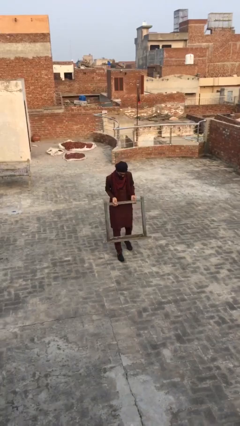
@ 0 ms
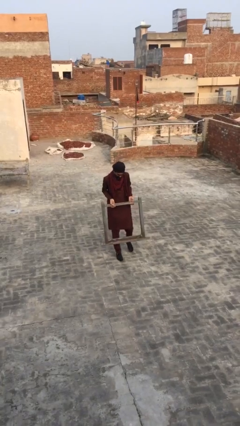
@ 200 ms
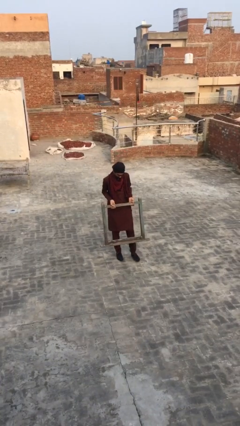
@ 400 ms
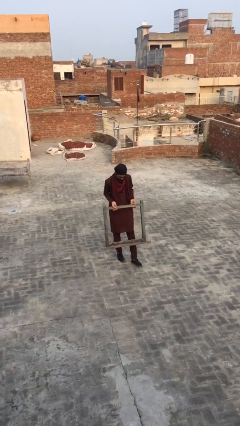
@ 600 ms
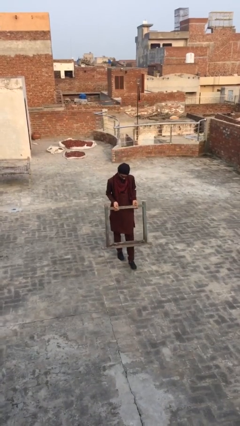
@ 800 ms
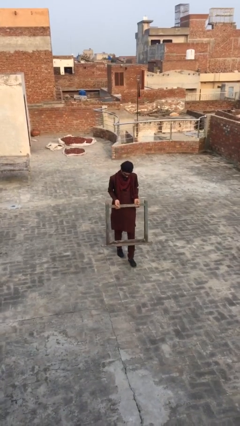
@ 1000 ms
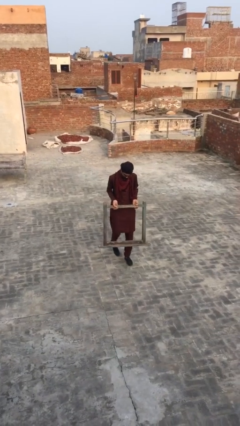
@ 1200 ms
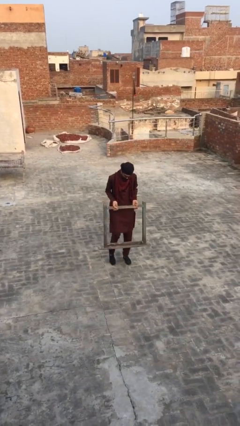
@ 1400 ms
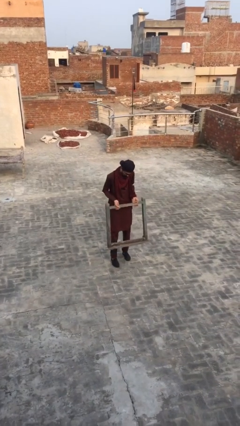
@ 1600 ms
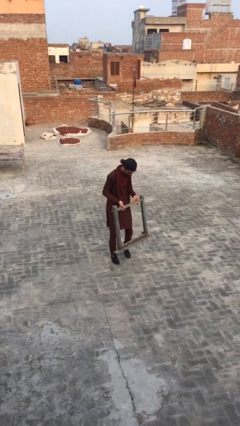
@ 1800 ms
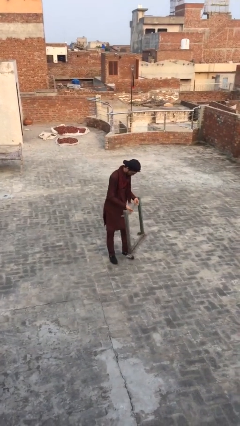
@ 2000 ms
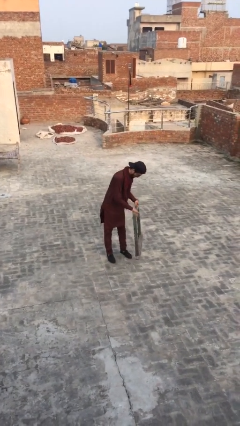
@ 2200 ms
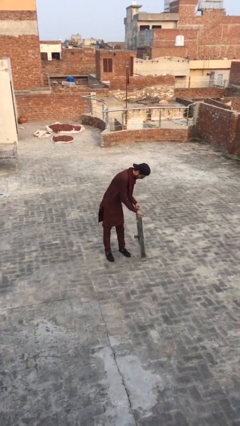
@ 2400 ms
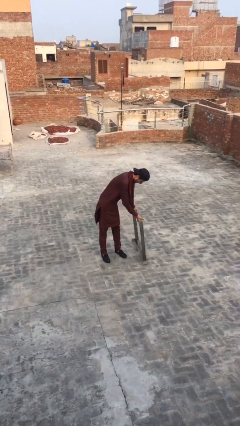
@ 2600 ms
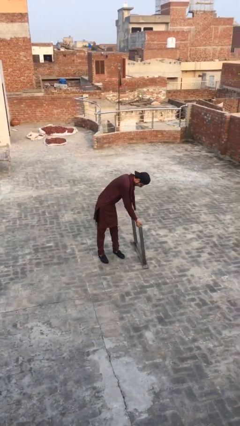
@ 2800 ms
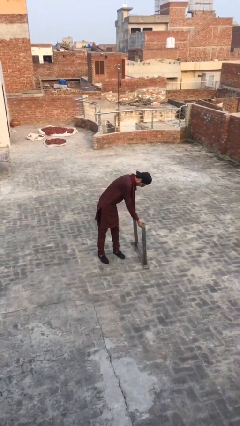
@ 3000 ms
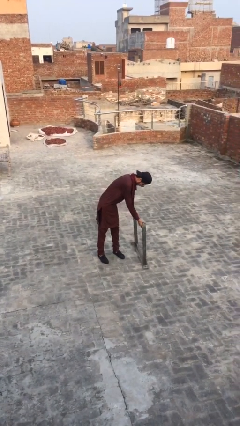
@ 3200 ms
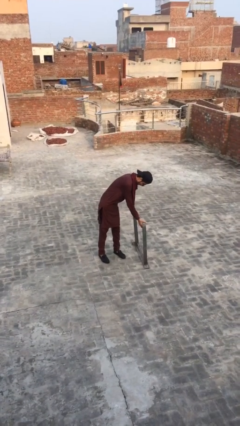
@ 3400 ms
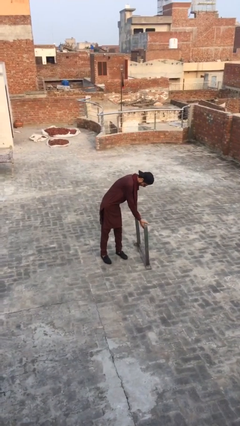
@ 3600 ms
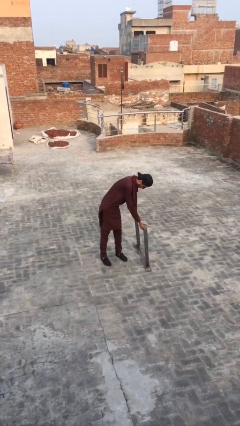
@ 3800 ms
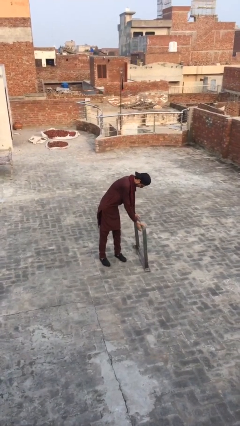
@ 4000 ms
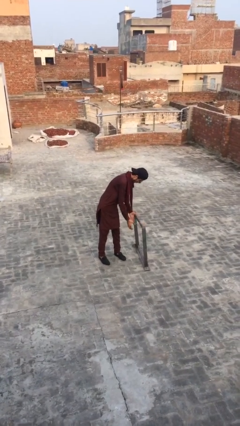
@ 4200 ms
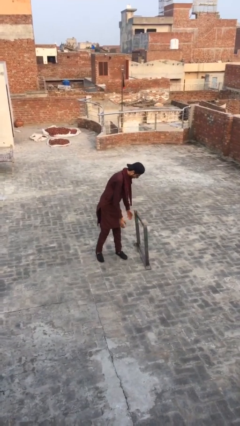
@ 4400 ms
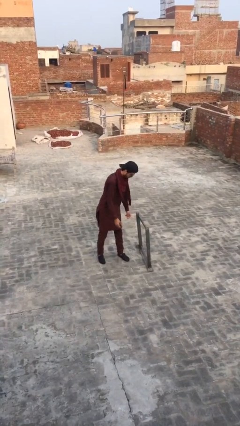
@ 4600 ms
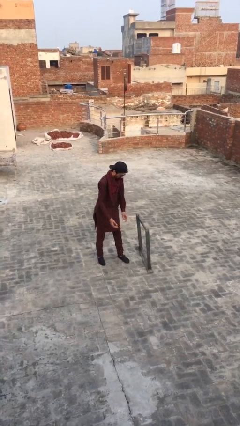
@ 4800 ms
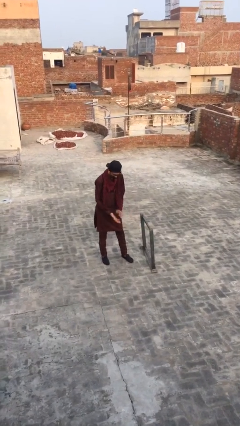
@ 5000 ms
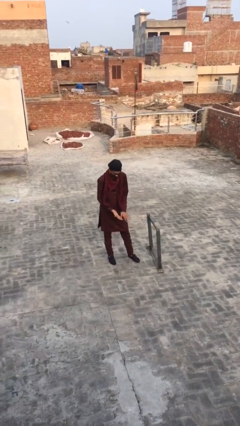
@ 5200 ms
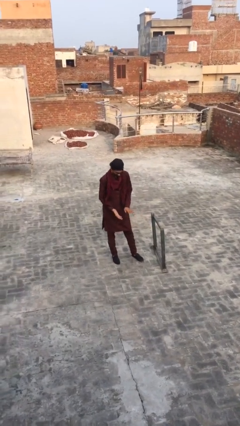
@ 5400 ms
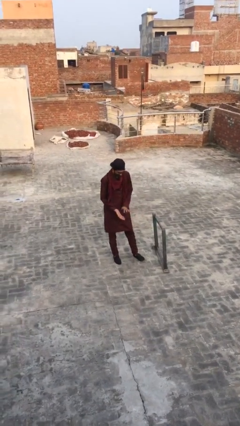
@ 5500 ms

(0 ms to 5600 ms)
person puts down object on floor

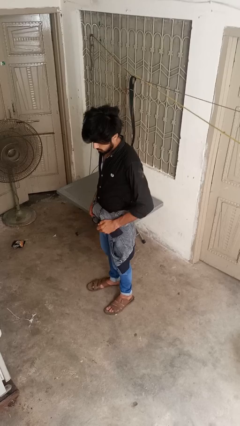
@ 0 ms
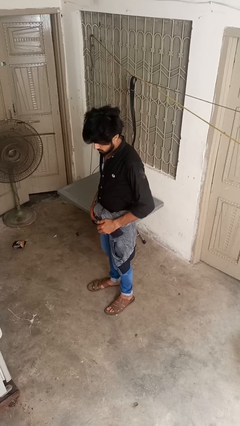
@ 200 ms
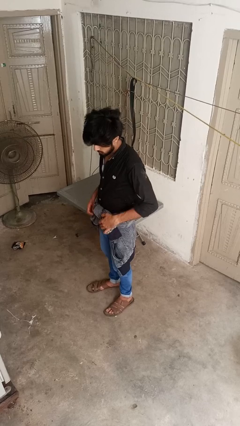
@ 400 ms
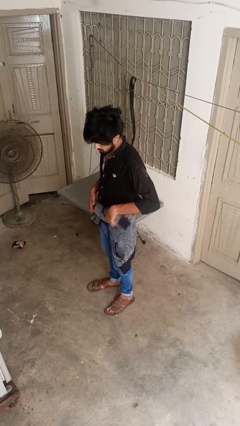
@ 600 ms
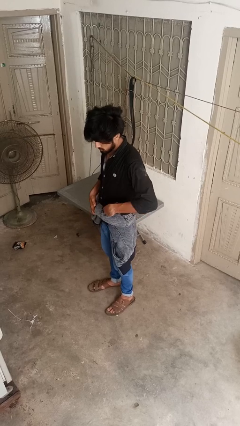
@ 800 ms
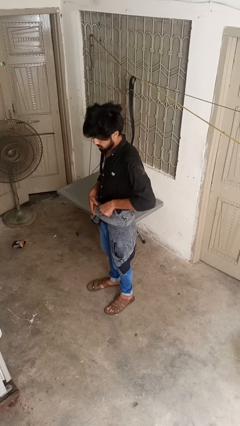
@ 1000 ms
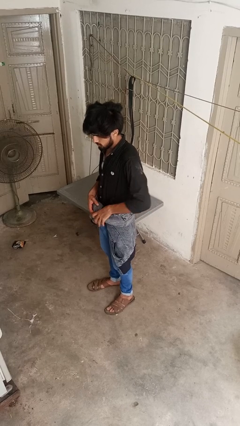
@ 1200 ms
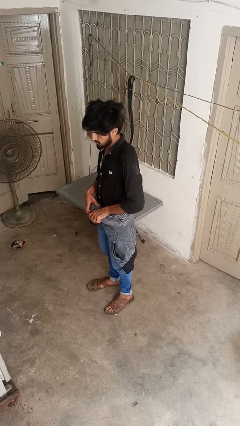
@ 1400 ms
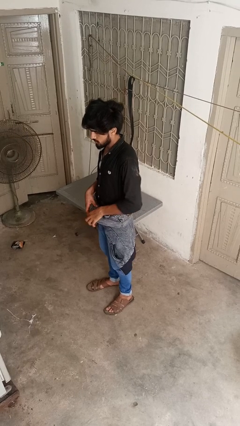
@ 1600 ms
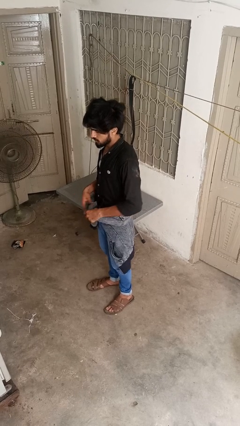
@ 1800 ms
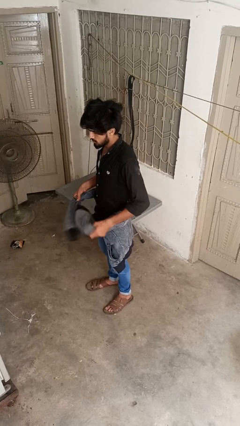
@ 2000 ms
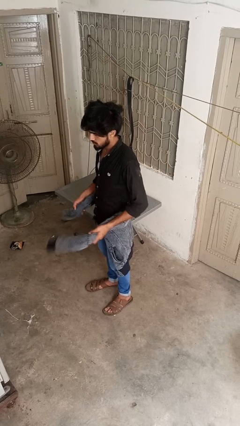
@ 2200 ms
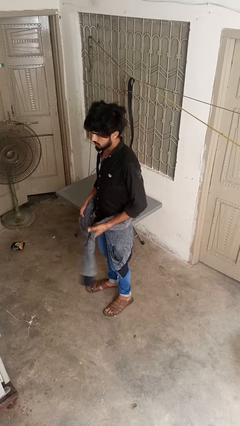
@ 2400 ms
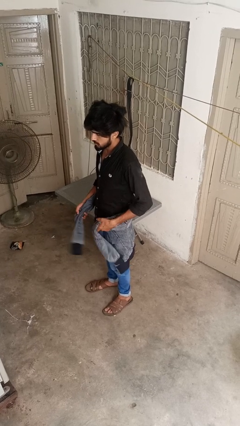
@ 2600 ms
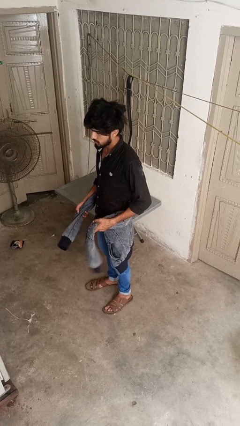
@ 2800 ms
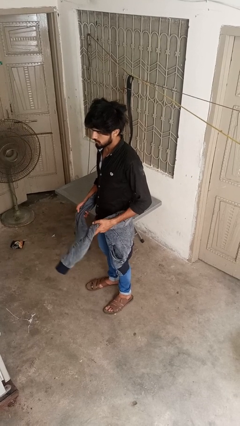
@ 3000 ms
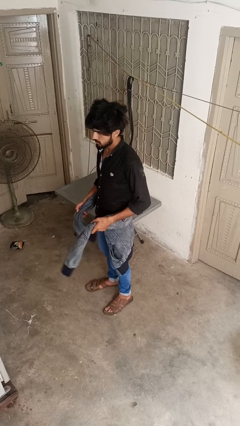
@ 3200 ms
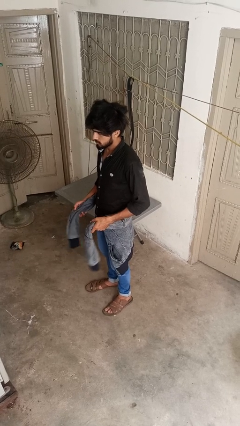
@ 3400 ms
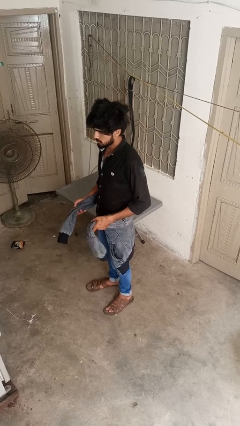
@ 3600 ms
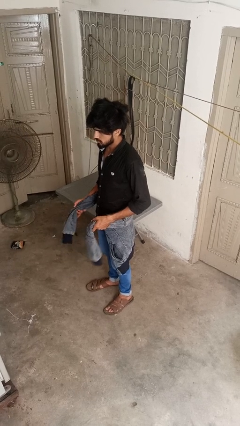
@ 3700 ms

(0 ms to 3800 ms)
person unties jacket around waist

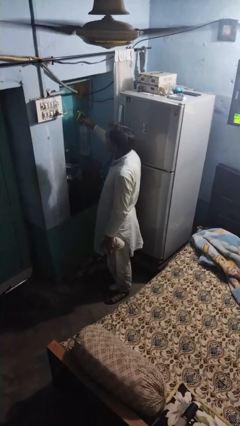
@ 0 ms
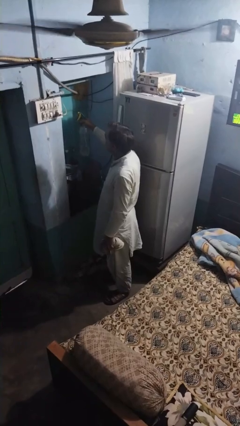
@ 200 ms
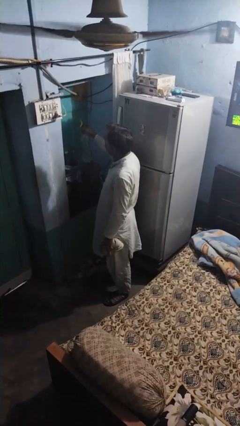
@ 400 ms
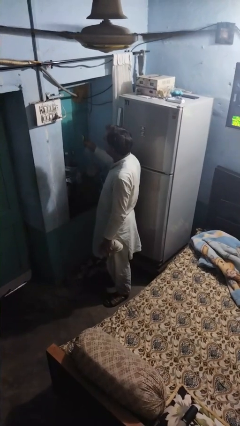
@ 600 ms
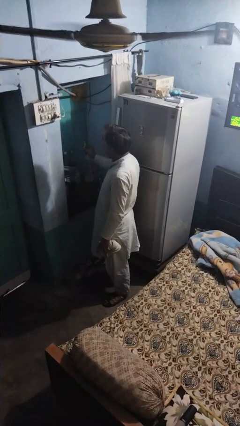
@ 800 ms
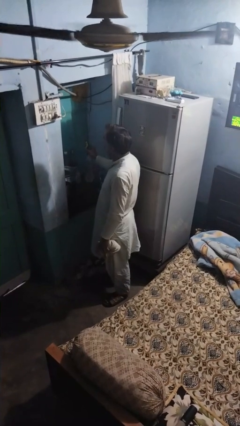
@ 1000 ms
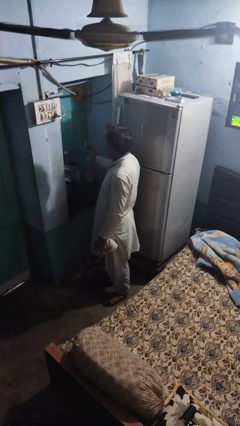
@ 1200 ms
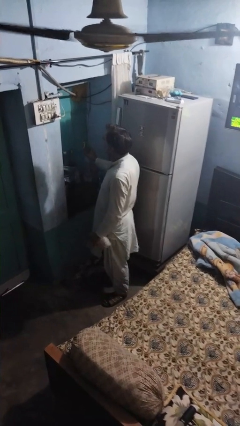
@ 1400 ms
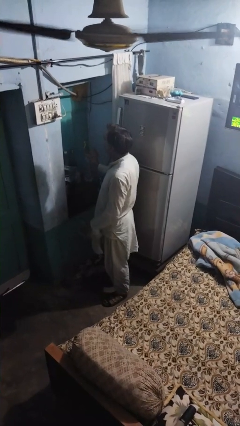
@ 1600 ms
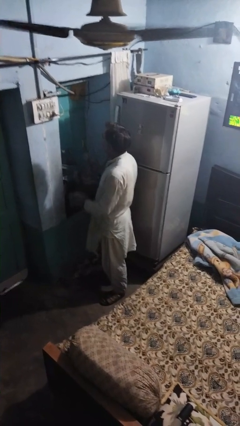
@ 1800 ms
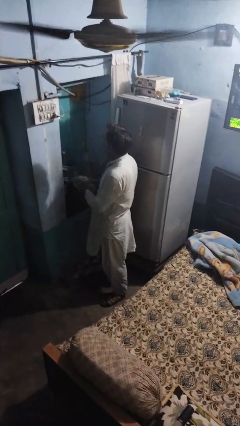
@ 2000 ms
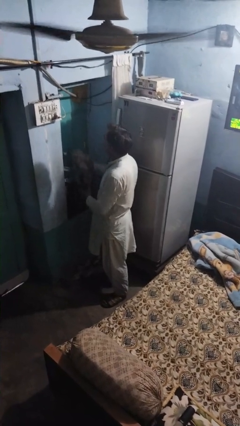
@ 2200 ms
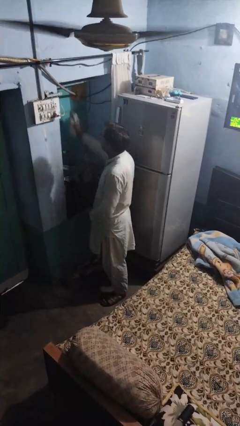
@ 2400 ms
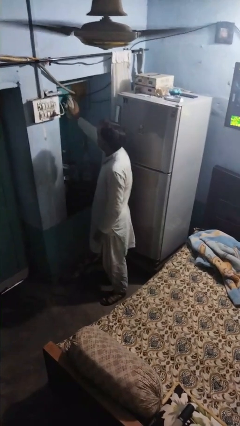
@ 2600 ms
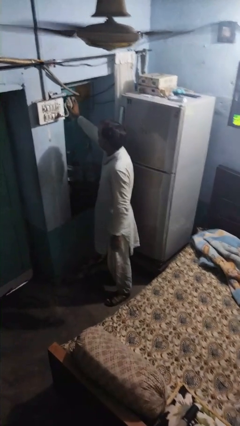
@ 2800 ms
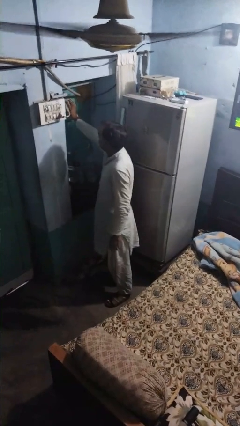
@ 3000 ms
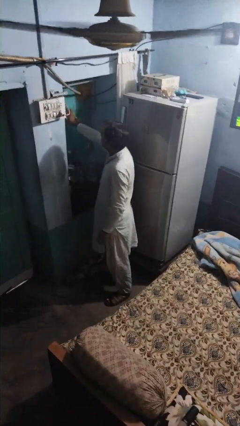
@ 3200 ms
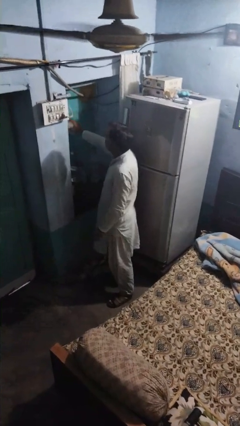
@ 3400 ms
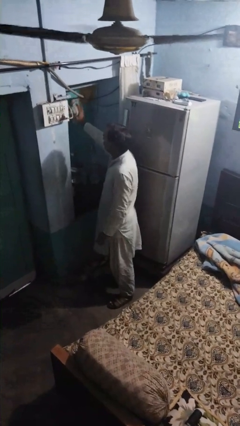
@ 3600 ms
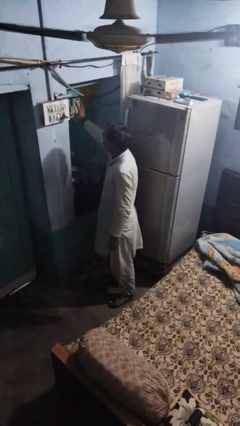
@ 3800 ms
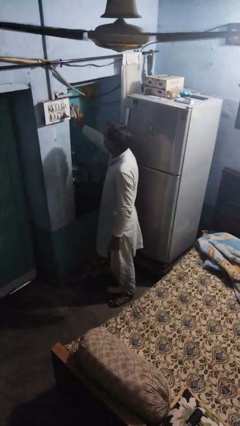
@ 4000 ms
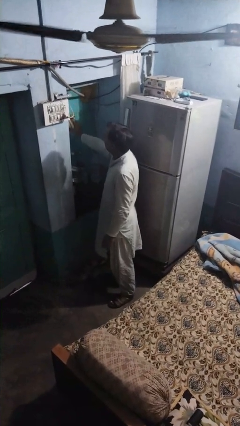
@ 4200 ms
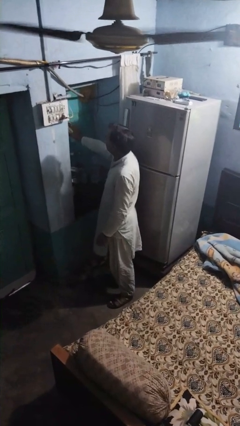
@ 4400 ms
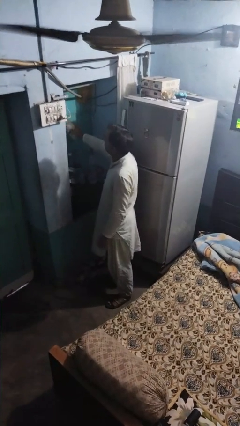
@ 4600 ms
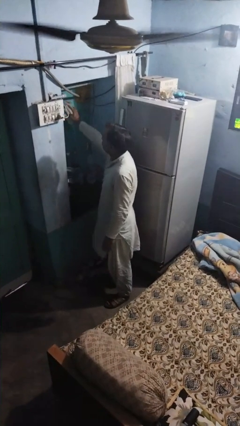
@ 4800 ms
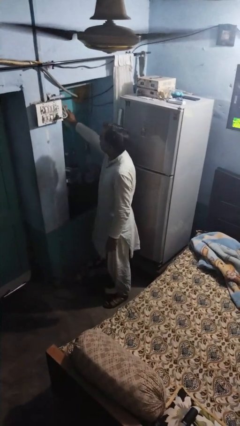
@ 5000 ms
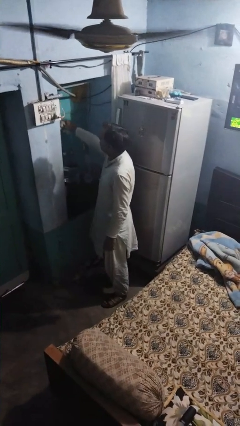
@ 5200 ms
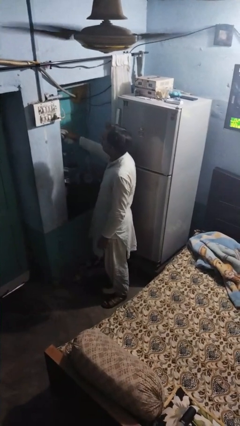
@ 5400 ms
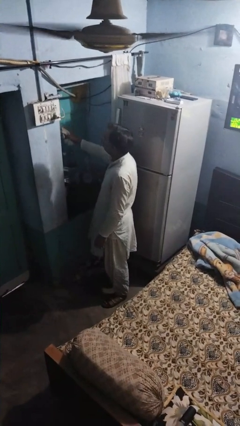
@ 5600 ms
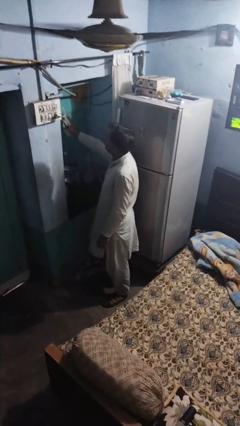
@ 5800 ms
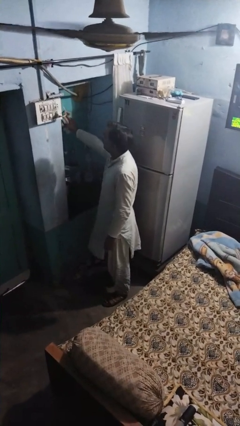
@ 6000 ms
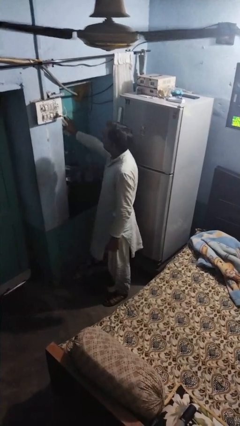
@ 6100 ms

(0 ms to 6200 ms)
person washes window

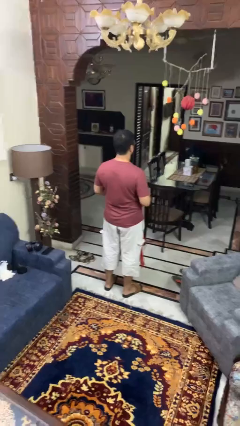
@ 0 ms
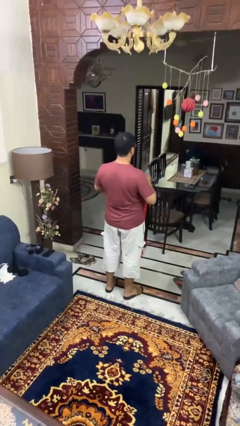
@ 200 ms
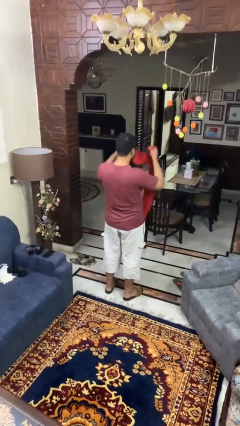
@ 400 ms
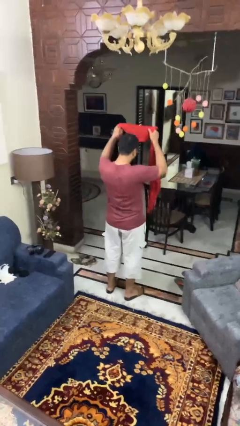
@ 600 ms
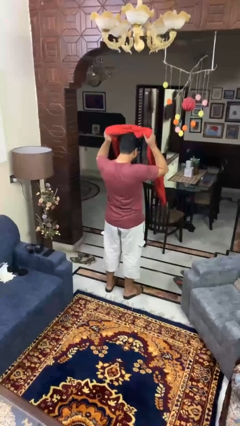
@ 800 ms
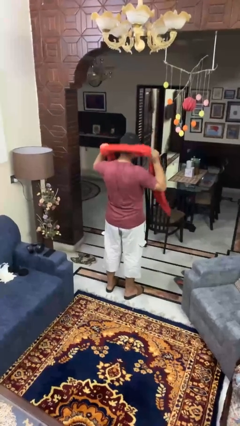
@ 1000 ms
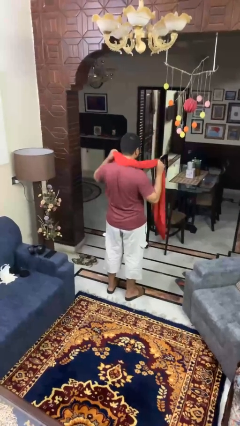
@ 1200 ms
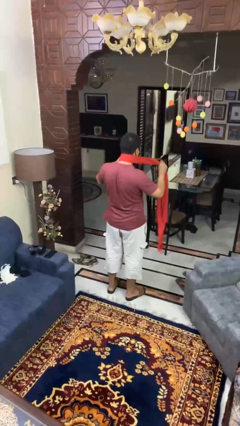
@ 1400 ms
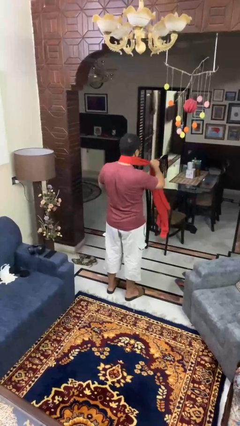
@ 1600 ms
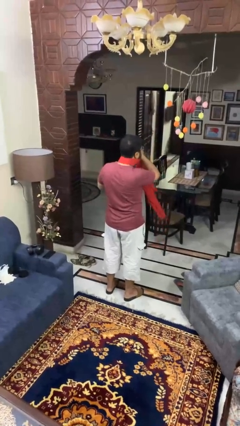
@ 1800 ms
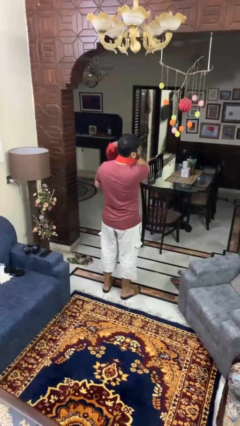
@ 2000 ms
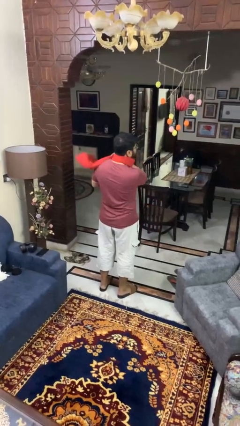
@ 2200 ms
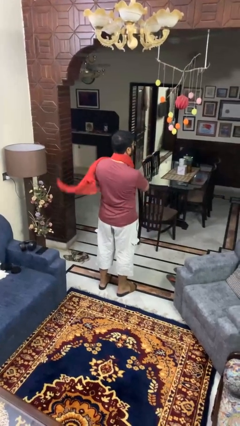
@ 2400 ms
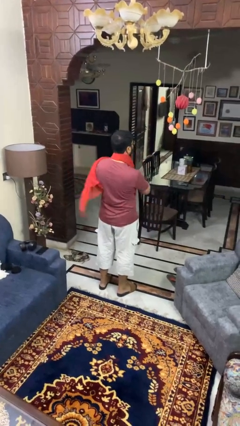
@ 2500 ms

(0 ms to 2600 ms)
person puts on scarf
